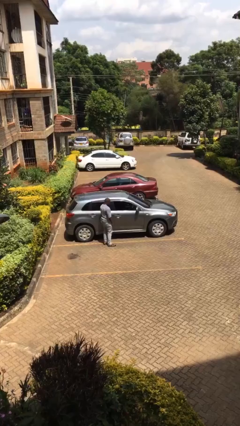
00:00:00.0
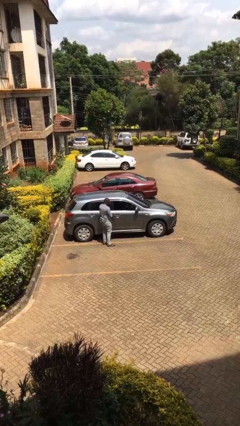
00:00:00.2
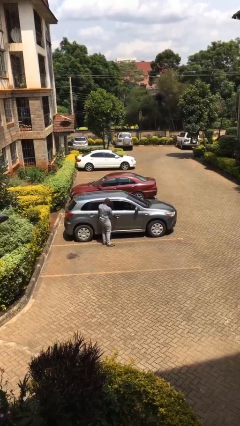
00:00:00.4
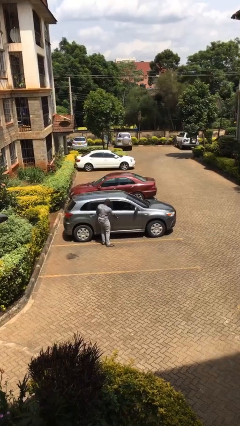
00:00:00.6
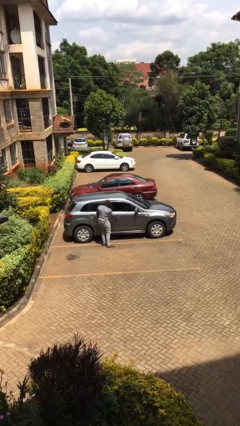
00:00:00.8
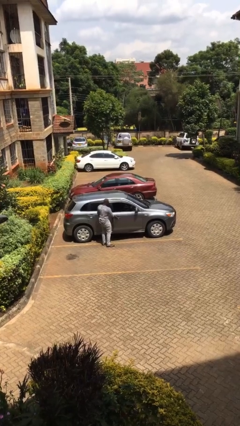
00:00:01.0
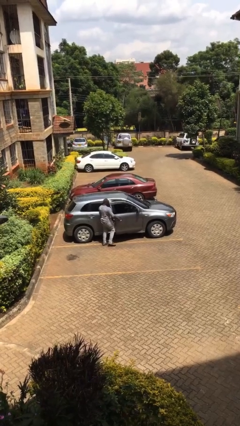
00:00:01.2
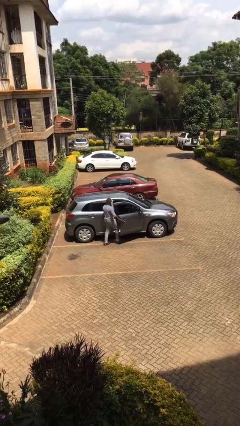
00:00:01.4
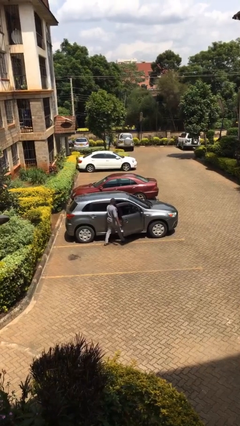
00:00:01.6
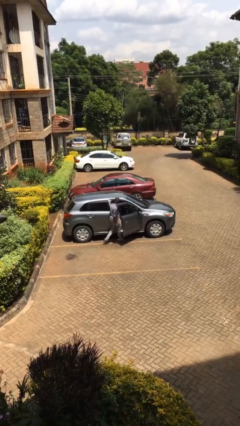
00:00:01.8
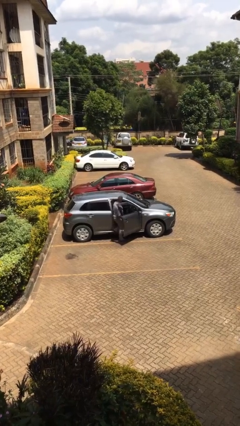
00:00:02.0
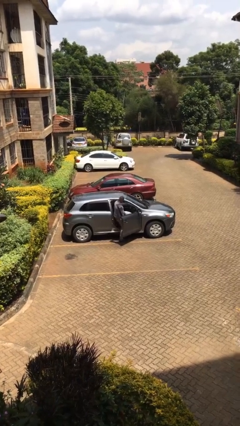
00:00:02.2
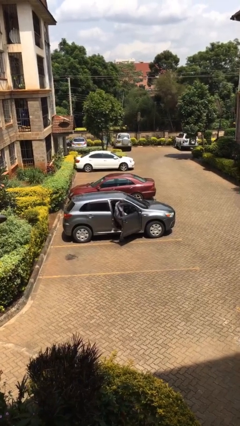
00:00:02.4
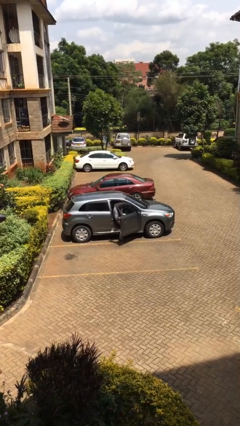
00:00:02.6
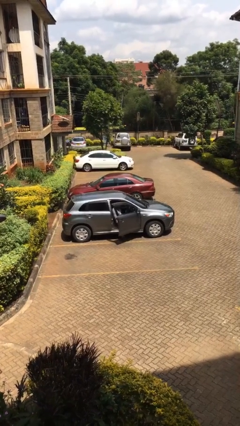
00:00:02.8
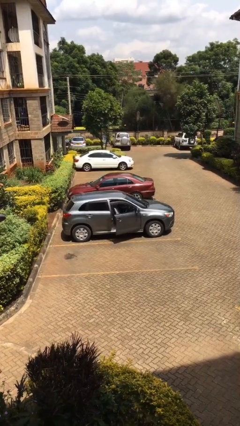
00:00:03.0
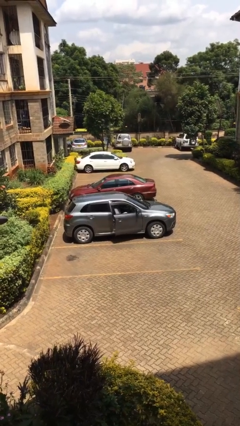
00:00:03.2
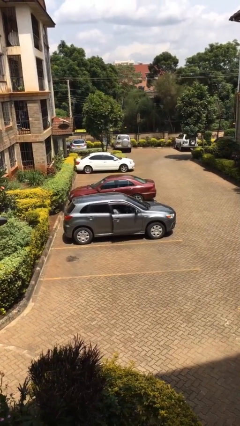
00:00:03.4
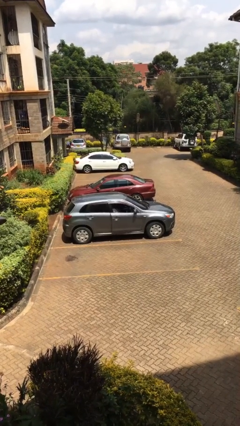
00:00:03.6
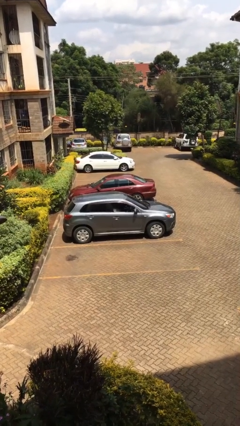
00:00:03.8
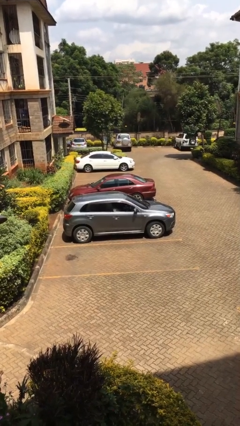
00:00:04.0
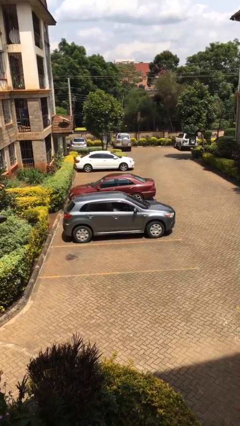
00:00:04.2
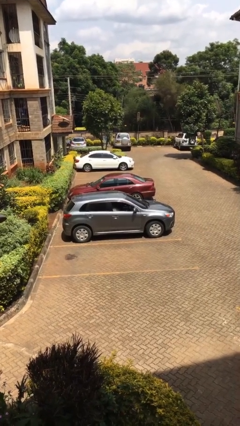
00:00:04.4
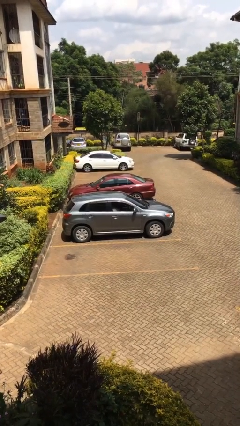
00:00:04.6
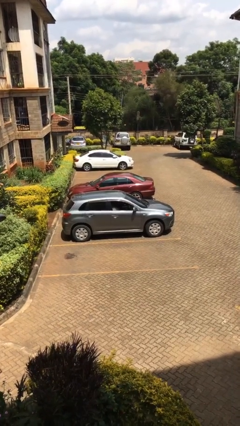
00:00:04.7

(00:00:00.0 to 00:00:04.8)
car picks up person

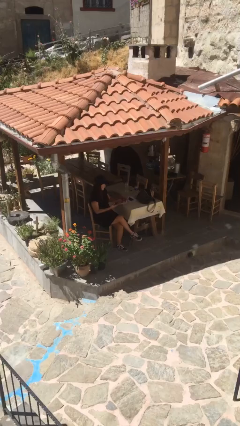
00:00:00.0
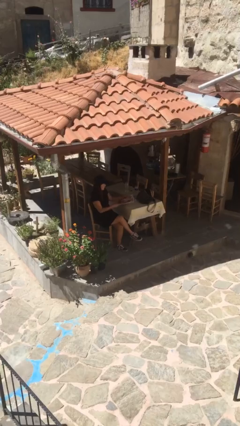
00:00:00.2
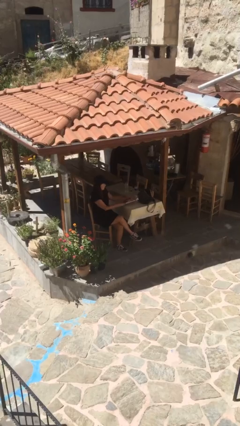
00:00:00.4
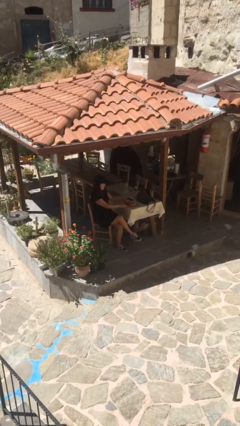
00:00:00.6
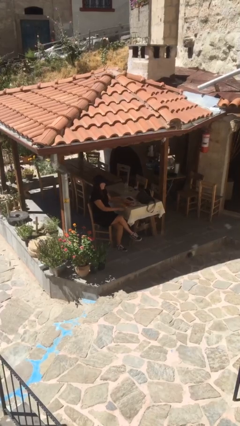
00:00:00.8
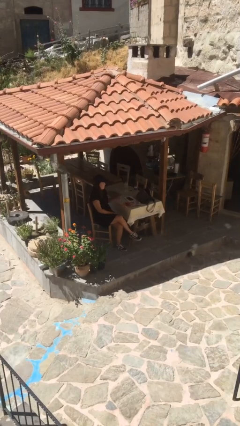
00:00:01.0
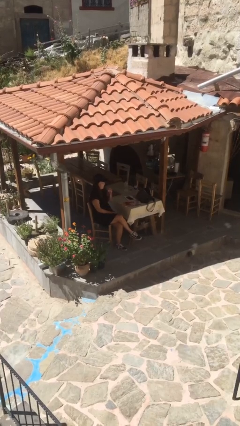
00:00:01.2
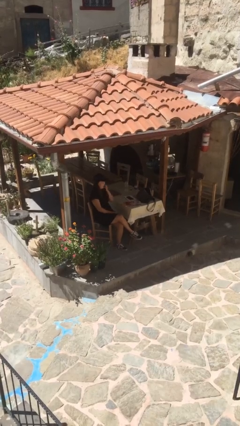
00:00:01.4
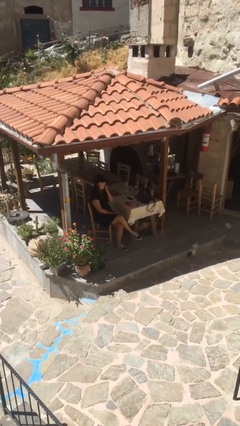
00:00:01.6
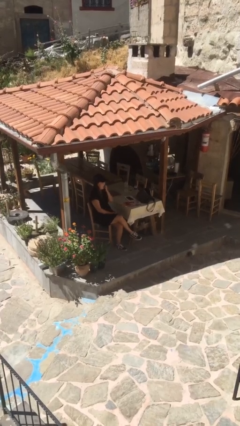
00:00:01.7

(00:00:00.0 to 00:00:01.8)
person puts down object on table

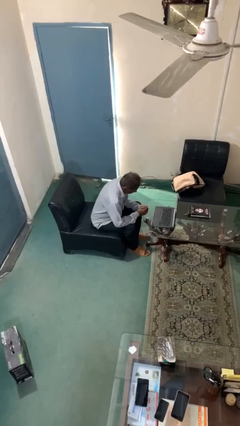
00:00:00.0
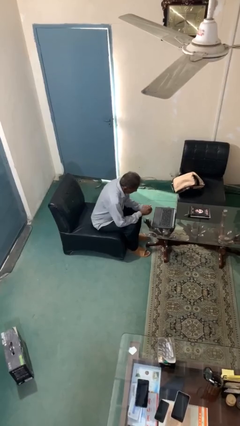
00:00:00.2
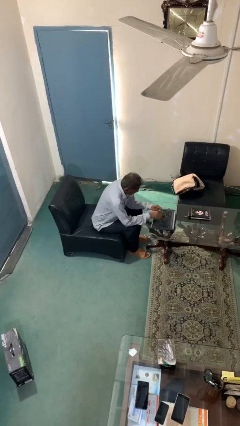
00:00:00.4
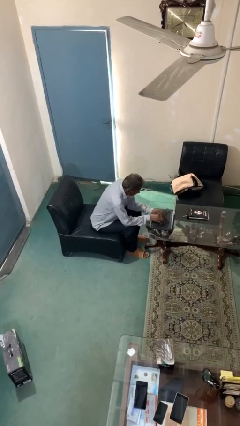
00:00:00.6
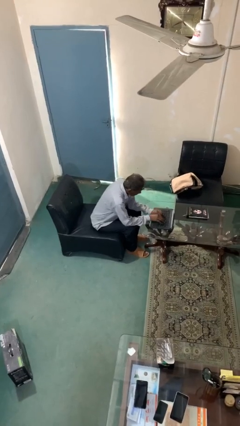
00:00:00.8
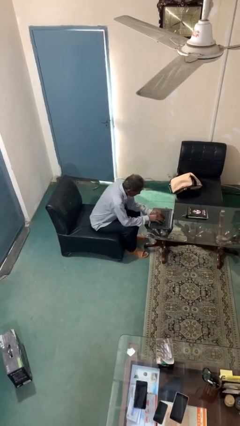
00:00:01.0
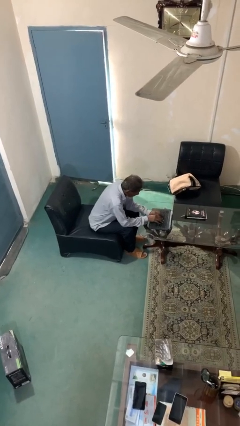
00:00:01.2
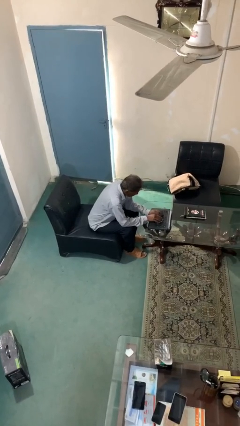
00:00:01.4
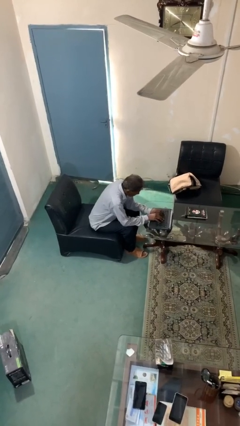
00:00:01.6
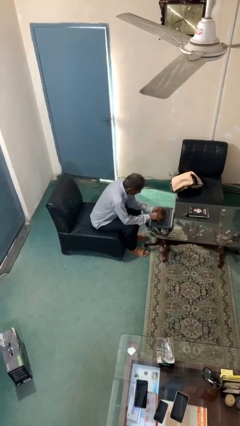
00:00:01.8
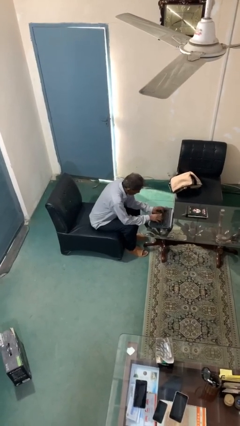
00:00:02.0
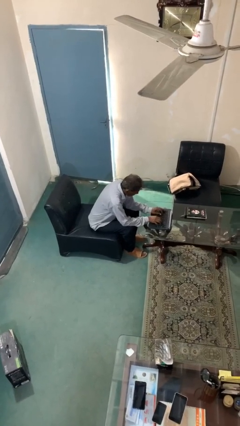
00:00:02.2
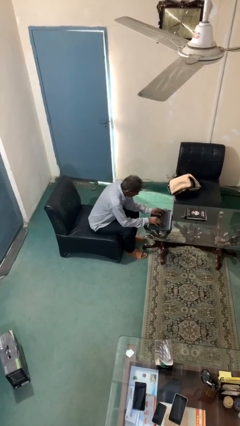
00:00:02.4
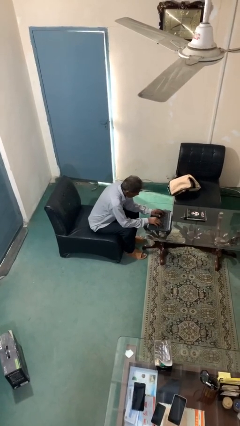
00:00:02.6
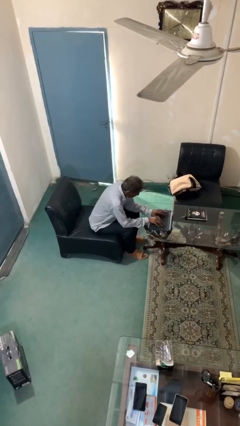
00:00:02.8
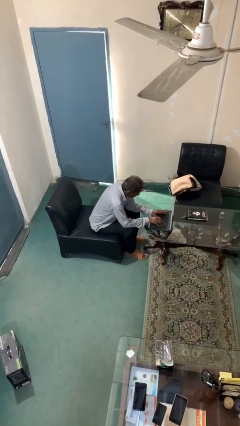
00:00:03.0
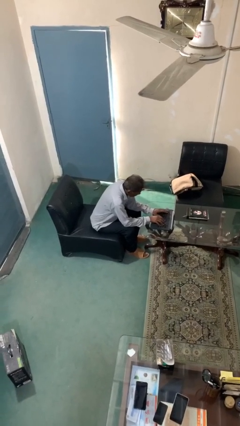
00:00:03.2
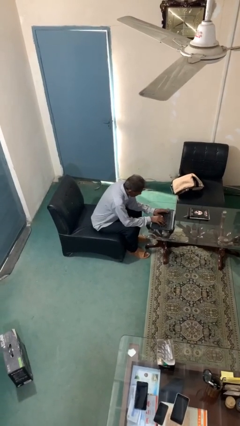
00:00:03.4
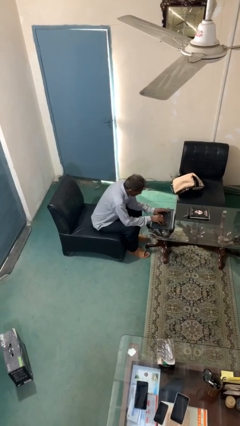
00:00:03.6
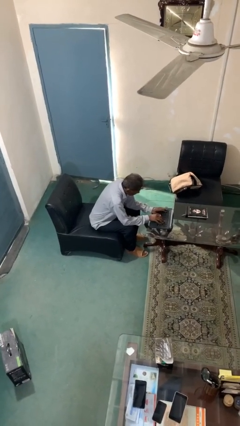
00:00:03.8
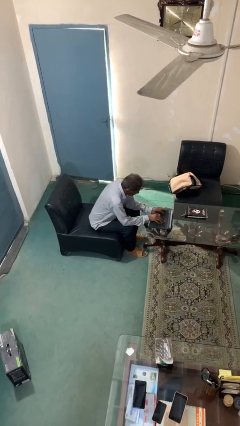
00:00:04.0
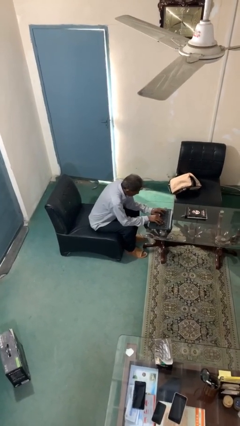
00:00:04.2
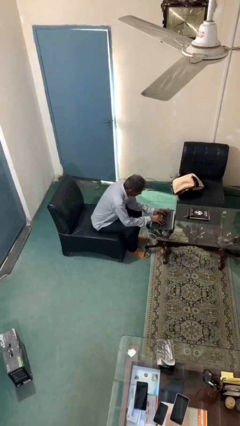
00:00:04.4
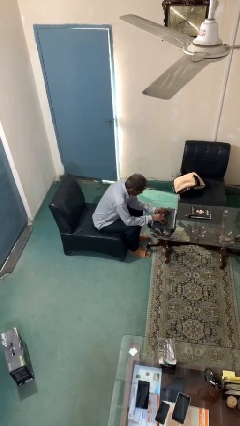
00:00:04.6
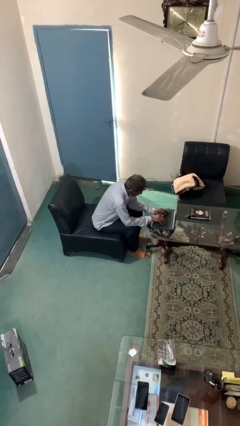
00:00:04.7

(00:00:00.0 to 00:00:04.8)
person interacts with laptop

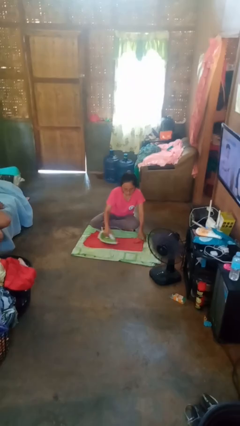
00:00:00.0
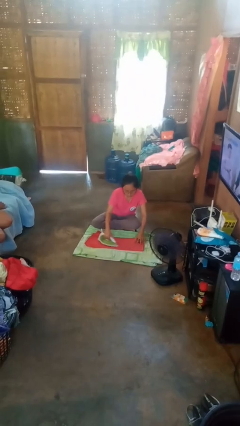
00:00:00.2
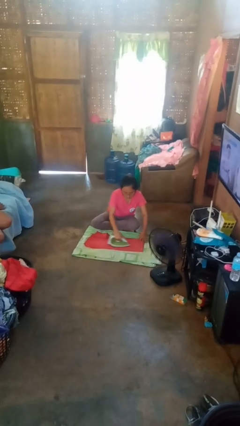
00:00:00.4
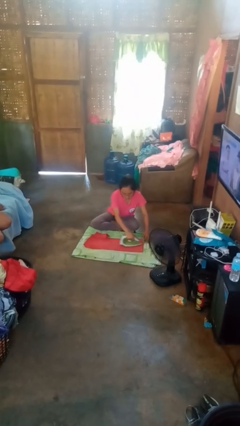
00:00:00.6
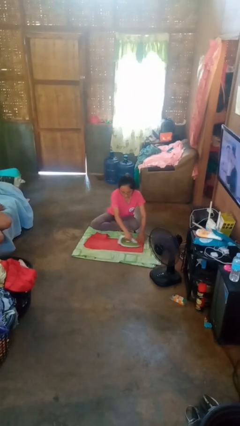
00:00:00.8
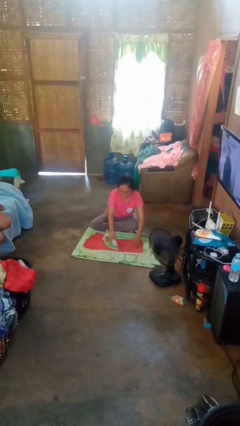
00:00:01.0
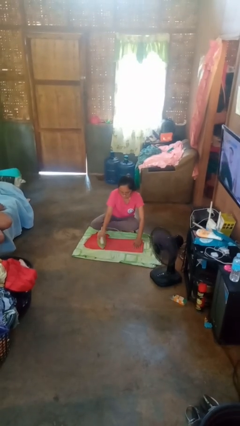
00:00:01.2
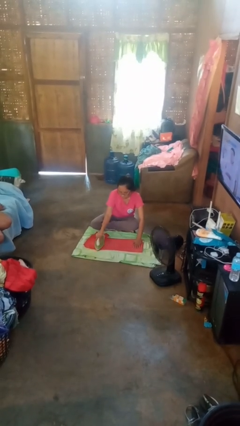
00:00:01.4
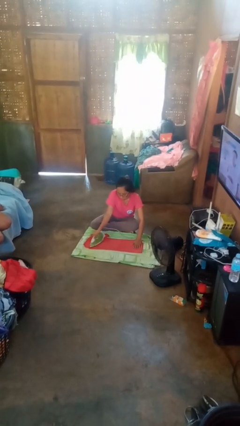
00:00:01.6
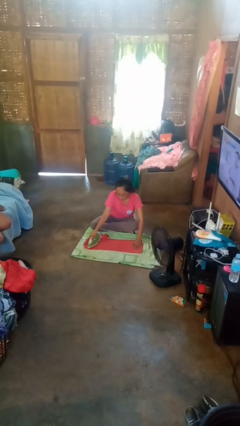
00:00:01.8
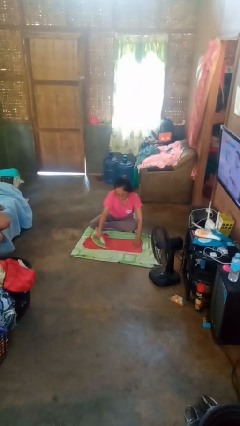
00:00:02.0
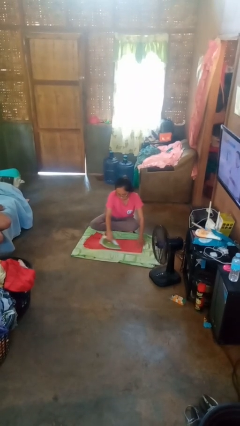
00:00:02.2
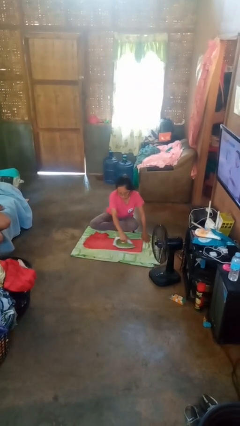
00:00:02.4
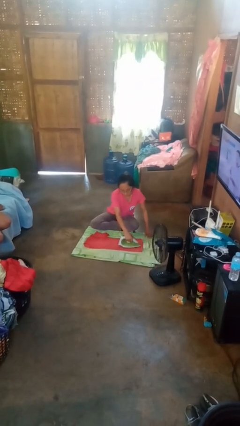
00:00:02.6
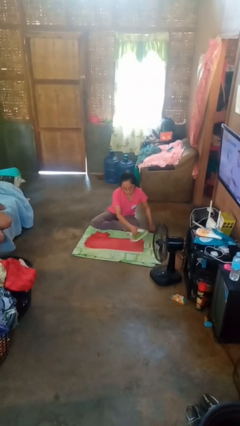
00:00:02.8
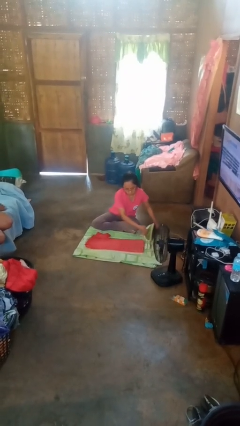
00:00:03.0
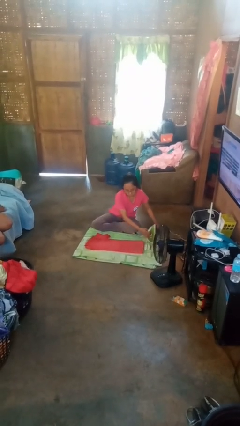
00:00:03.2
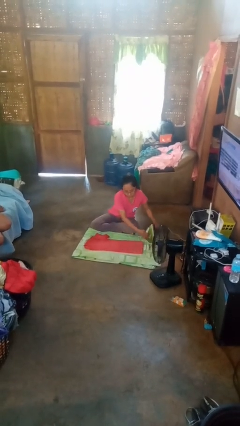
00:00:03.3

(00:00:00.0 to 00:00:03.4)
person irons clothes

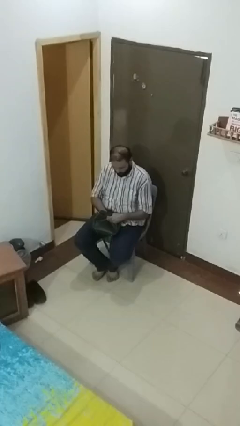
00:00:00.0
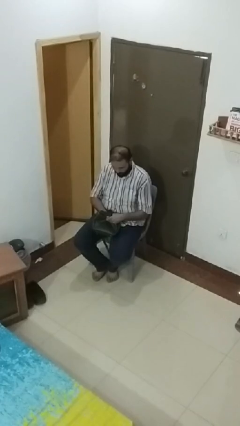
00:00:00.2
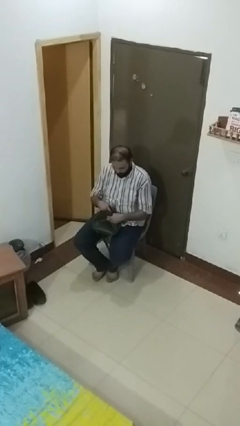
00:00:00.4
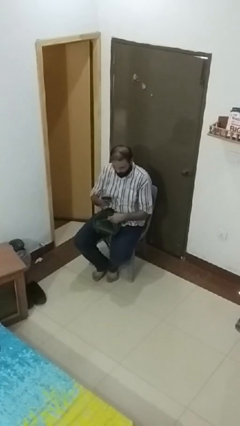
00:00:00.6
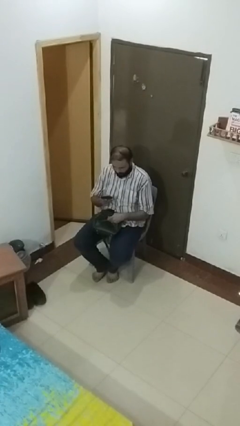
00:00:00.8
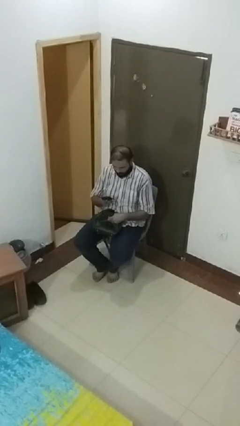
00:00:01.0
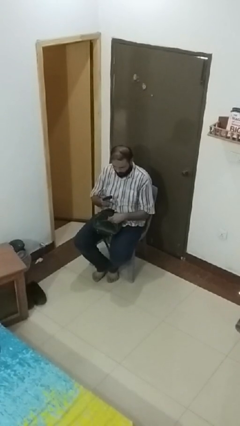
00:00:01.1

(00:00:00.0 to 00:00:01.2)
person takes object from purse

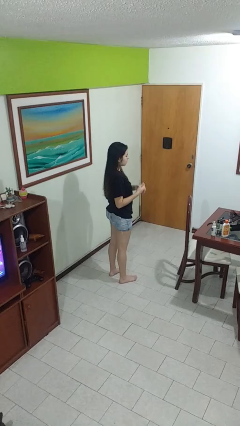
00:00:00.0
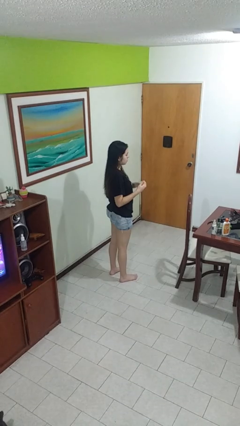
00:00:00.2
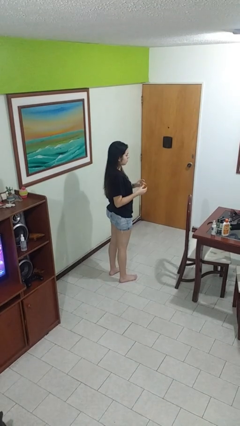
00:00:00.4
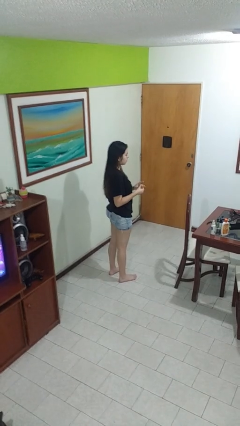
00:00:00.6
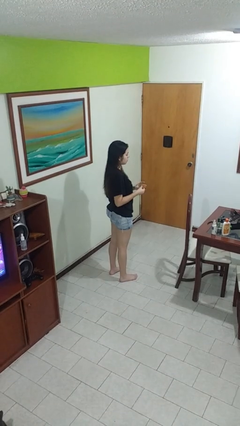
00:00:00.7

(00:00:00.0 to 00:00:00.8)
person takes off ring

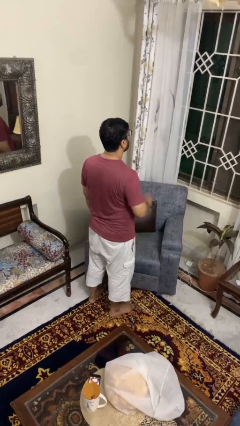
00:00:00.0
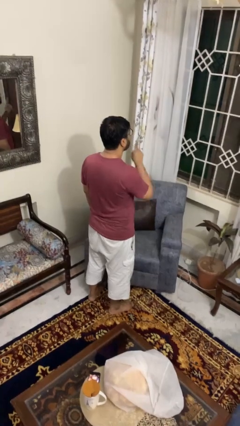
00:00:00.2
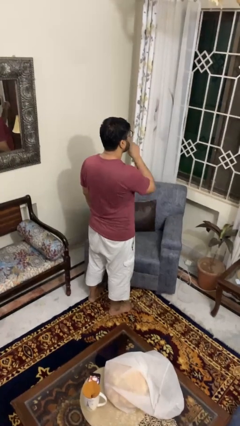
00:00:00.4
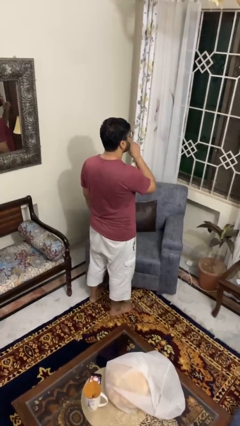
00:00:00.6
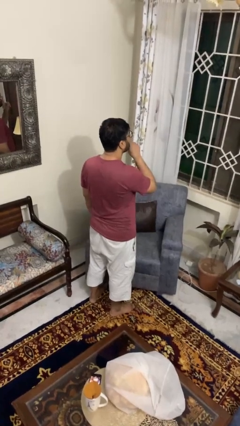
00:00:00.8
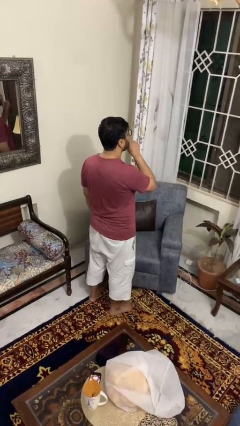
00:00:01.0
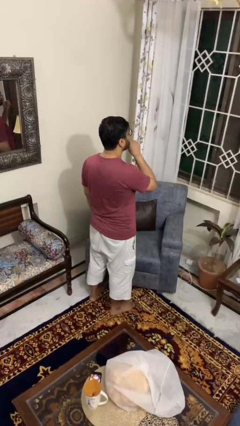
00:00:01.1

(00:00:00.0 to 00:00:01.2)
person gestures be quiet
